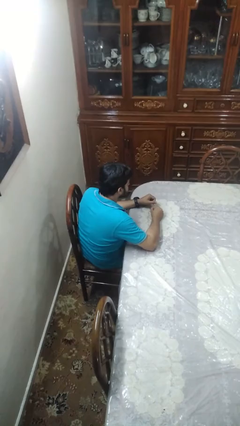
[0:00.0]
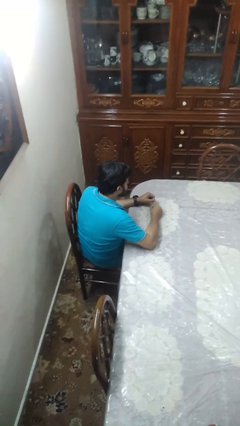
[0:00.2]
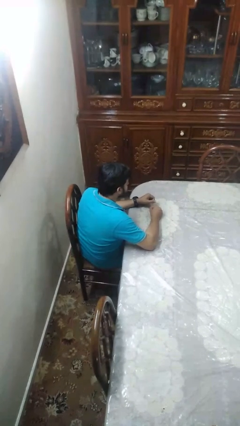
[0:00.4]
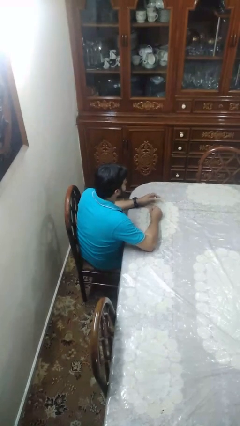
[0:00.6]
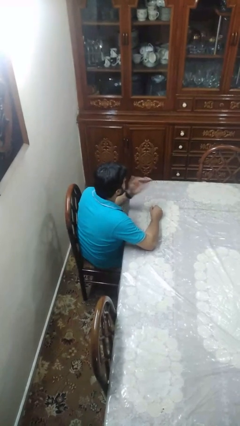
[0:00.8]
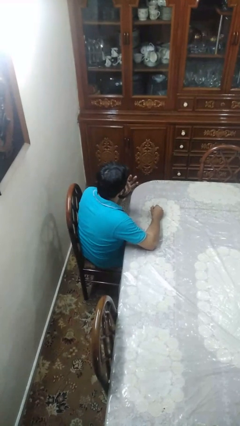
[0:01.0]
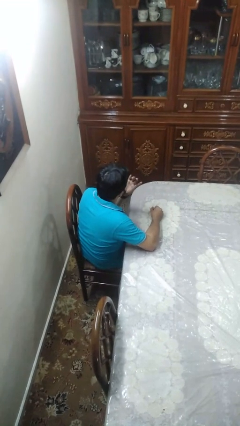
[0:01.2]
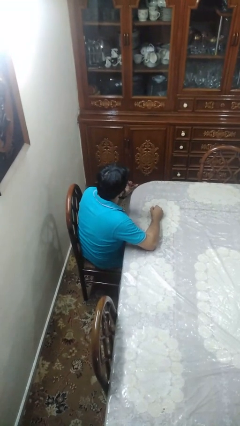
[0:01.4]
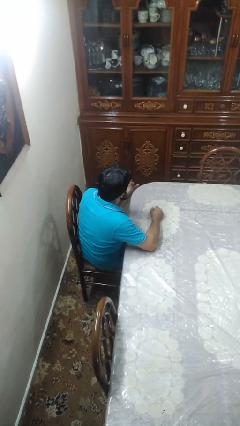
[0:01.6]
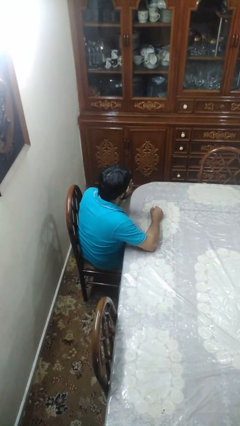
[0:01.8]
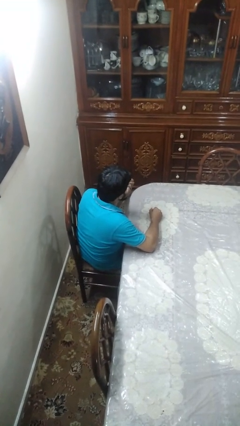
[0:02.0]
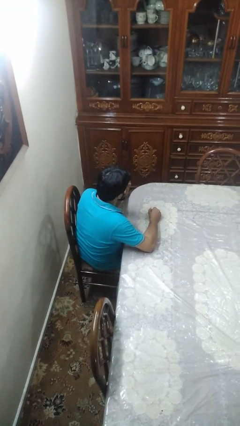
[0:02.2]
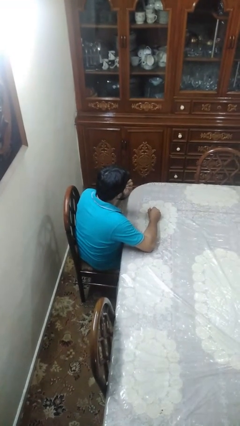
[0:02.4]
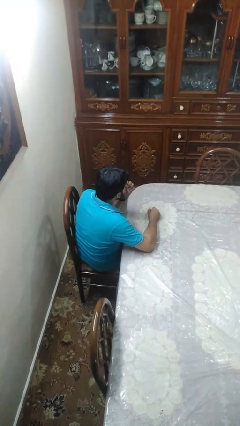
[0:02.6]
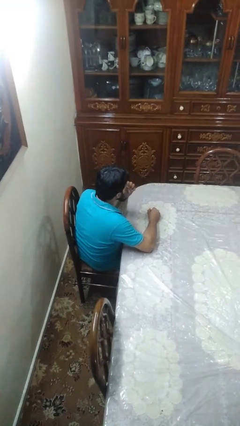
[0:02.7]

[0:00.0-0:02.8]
person licks fingers

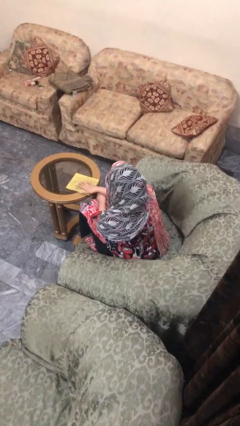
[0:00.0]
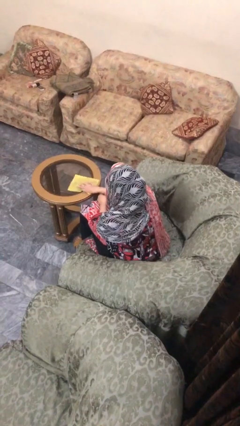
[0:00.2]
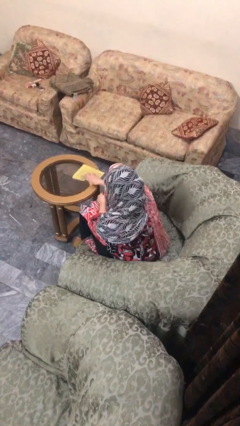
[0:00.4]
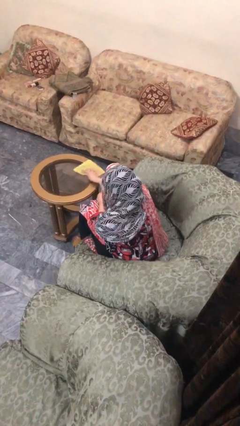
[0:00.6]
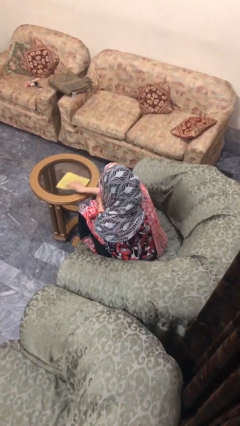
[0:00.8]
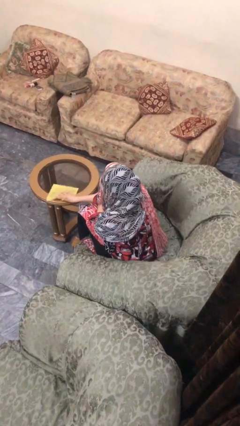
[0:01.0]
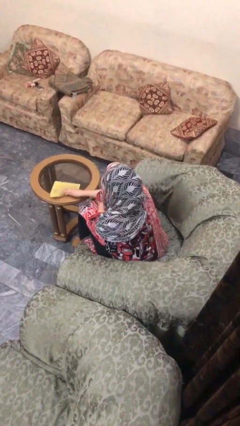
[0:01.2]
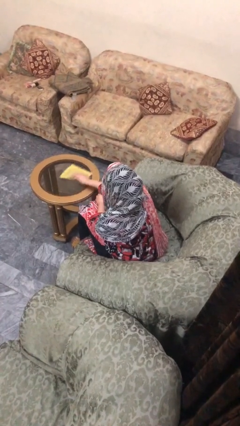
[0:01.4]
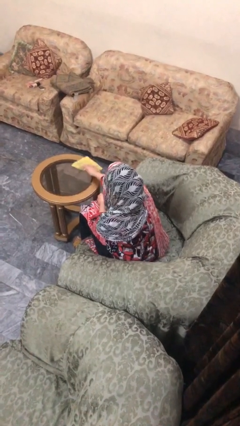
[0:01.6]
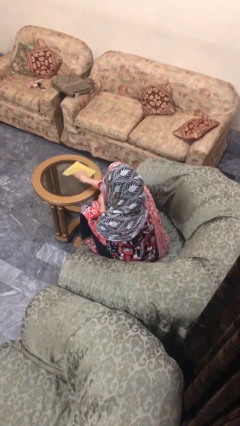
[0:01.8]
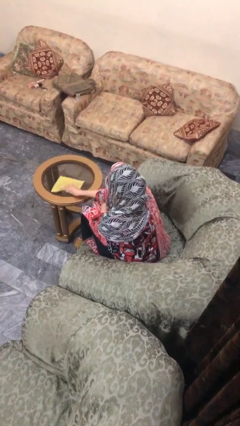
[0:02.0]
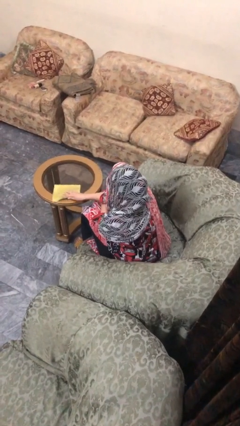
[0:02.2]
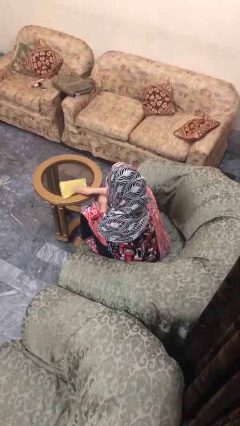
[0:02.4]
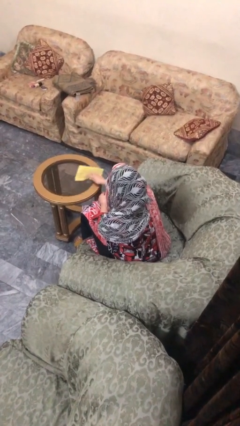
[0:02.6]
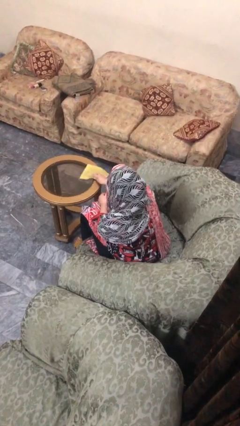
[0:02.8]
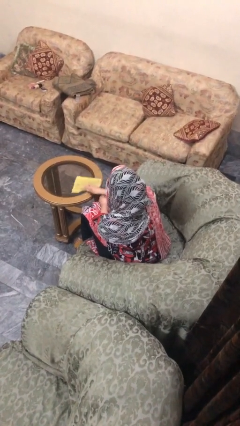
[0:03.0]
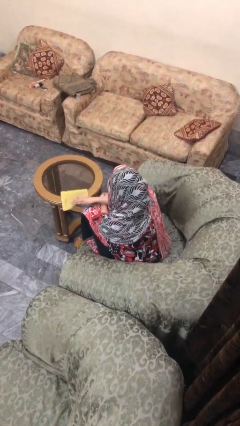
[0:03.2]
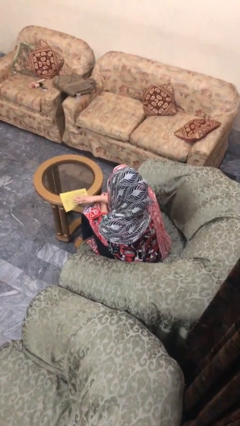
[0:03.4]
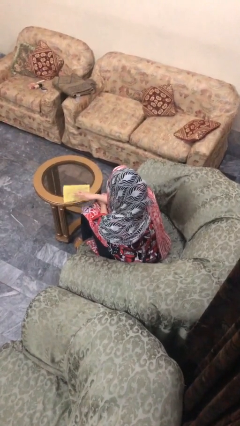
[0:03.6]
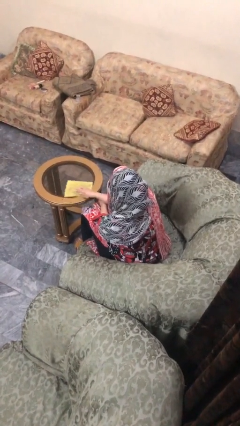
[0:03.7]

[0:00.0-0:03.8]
person cleans table with rag

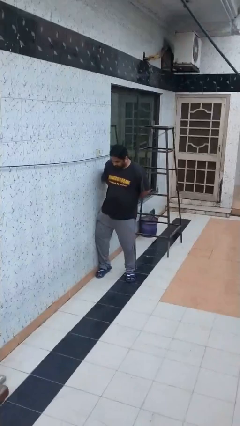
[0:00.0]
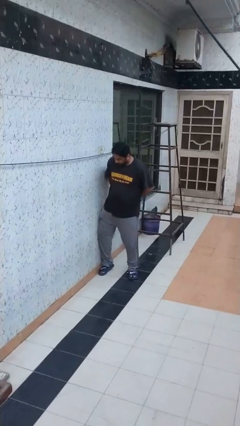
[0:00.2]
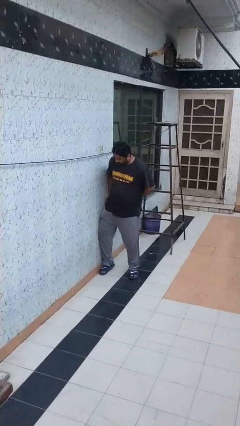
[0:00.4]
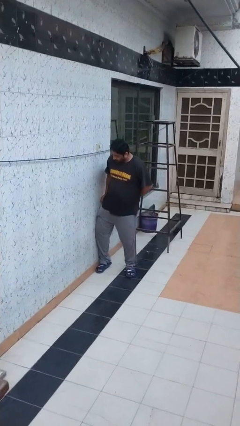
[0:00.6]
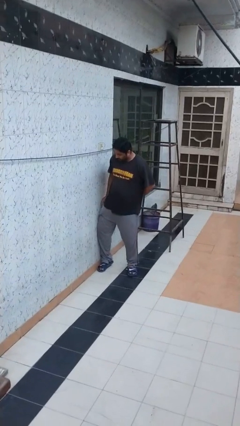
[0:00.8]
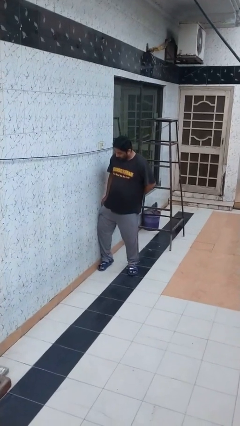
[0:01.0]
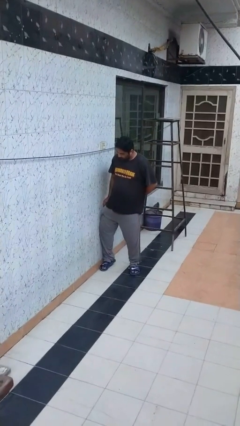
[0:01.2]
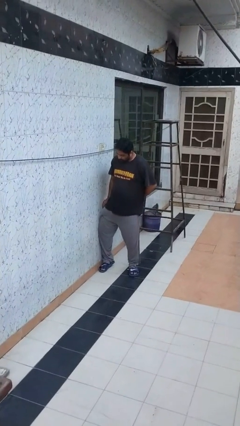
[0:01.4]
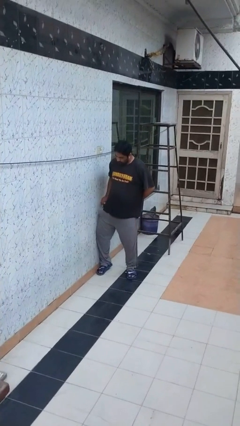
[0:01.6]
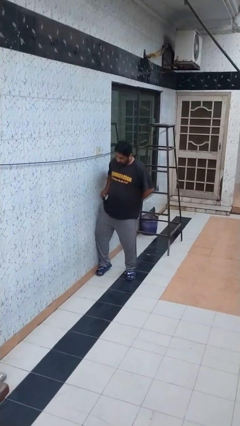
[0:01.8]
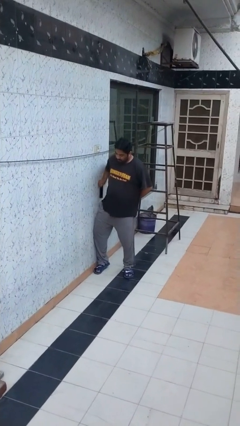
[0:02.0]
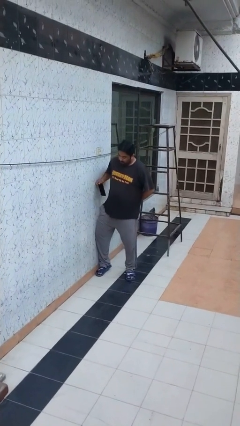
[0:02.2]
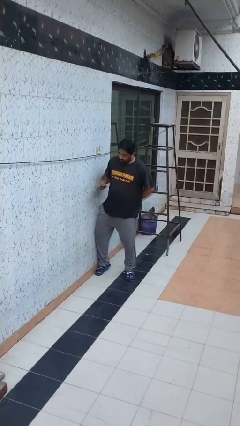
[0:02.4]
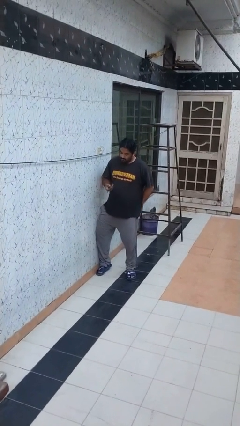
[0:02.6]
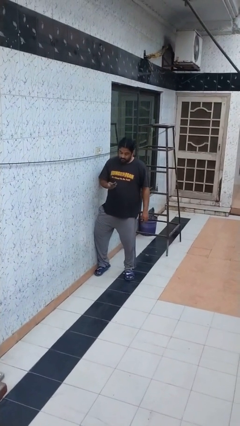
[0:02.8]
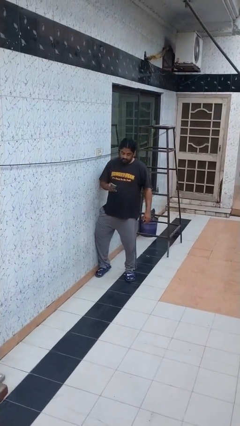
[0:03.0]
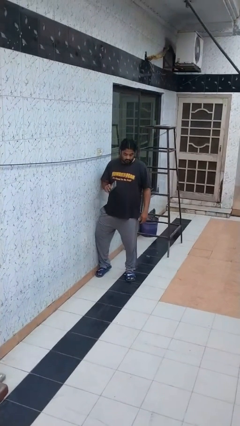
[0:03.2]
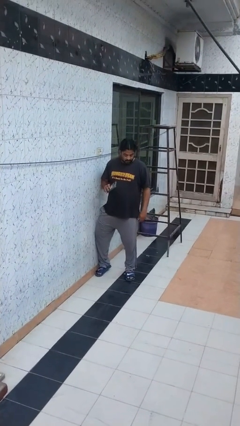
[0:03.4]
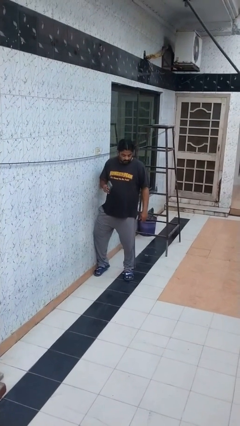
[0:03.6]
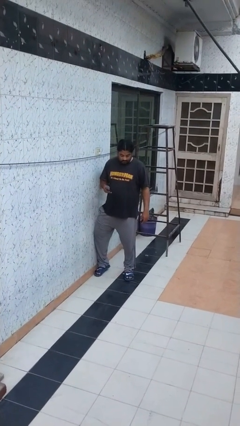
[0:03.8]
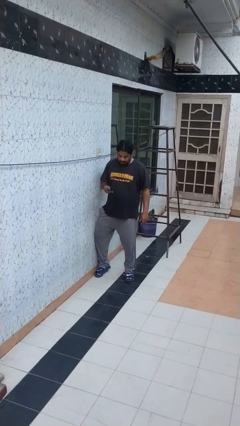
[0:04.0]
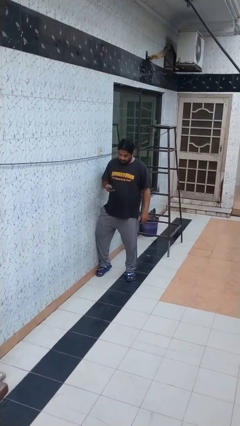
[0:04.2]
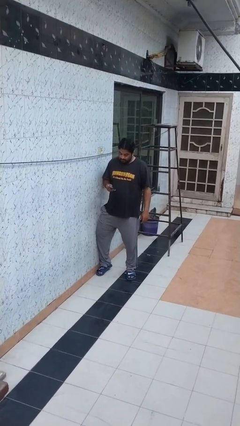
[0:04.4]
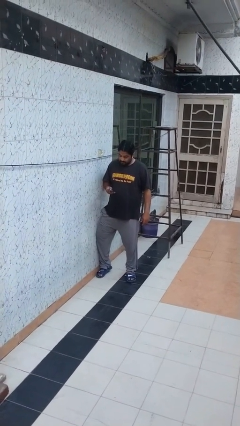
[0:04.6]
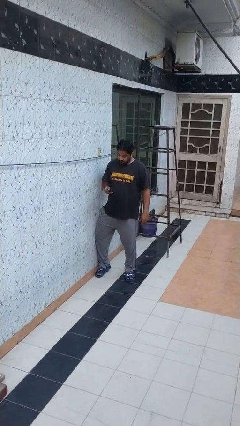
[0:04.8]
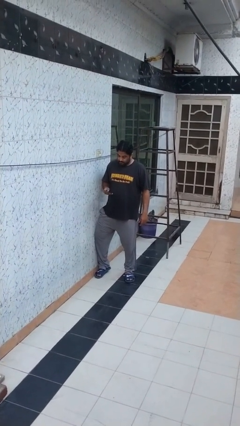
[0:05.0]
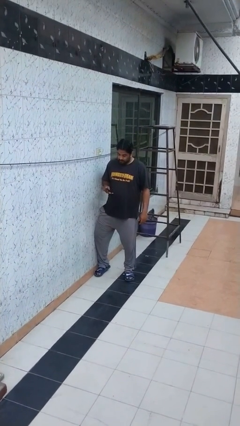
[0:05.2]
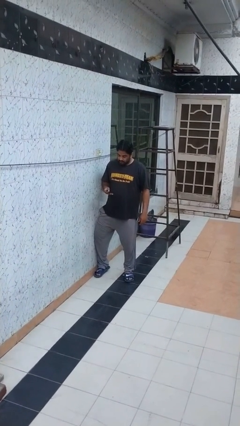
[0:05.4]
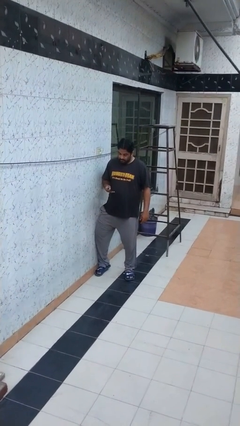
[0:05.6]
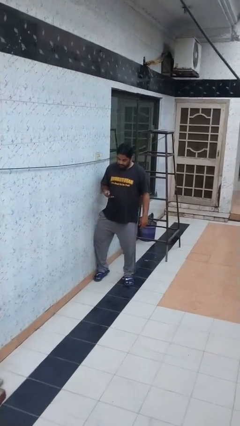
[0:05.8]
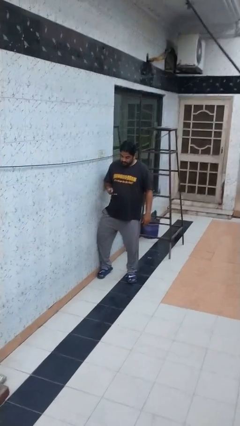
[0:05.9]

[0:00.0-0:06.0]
person takes phone from pocket

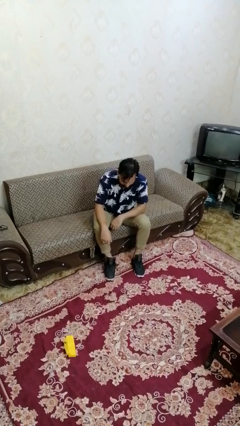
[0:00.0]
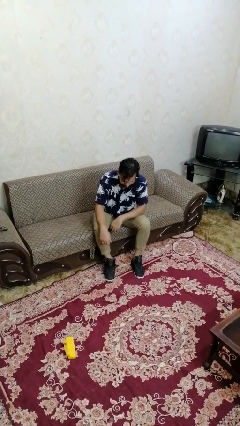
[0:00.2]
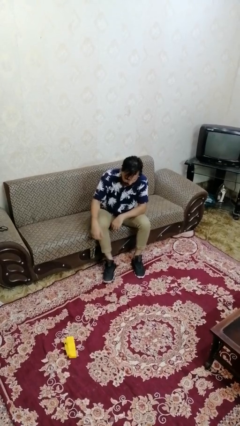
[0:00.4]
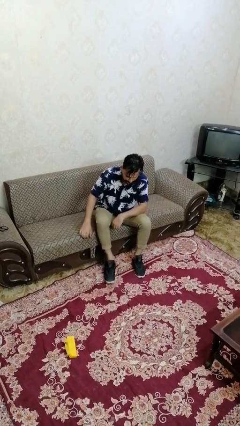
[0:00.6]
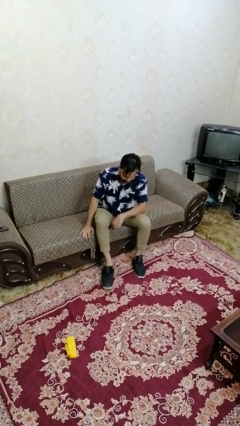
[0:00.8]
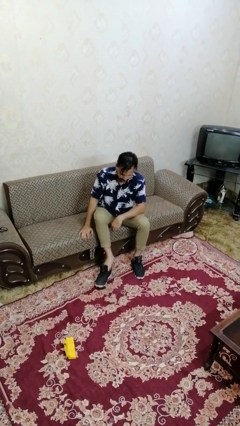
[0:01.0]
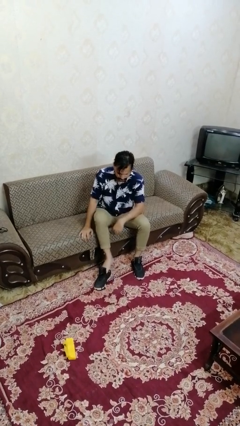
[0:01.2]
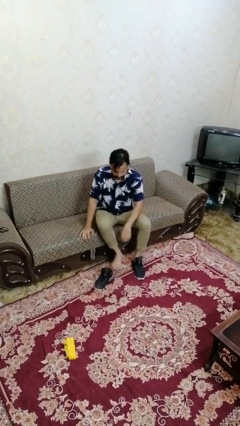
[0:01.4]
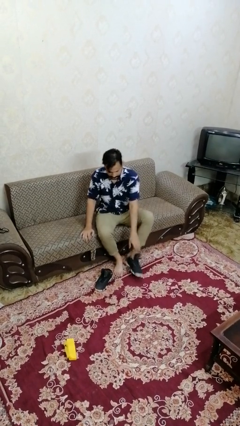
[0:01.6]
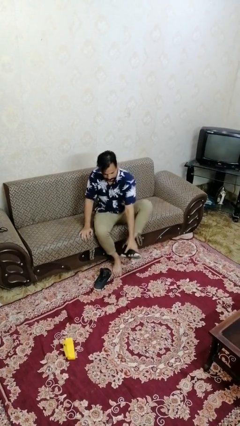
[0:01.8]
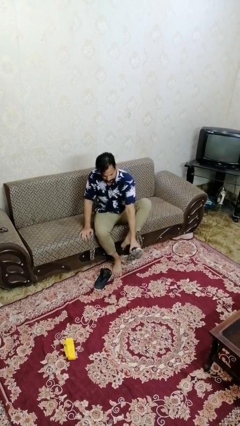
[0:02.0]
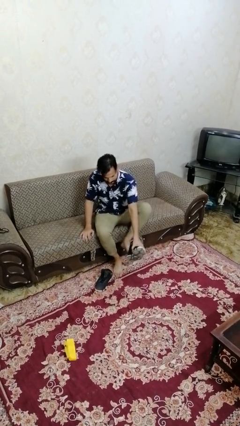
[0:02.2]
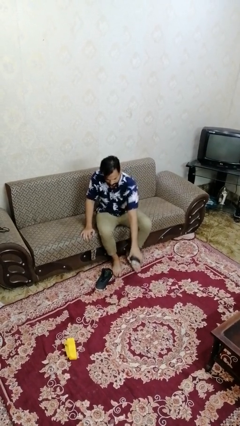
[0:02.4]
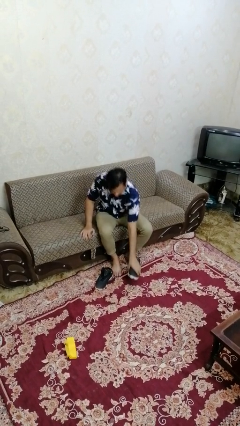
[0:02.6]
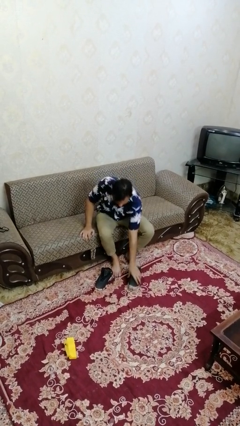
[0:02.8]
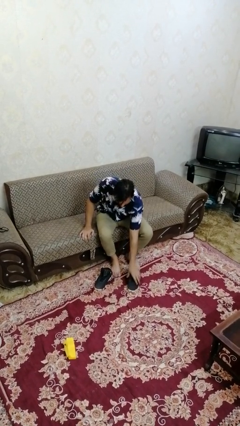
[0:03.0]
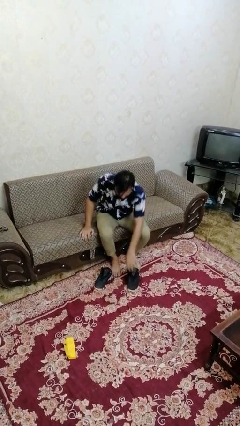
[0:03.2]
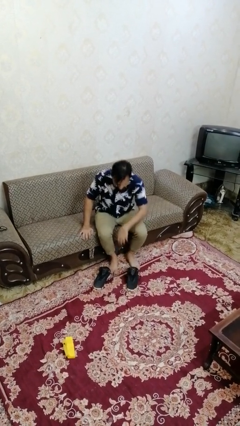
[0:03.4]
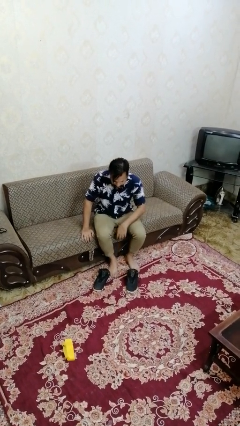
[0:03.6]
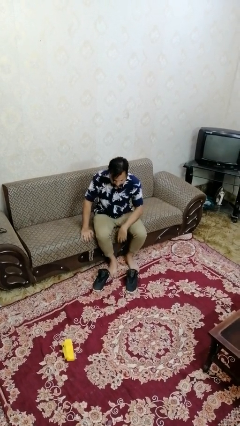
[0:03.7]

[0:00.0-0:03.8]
person takes off shoes

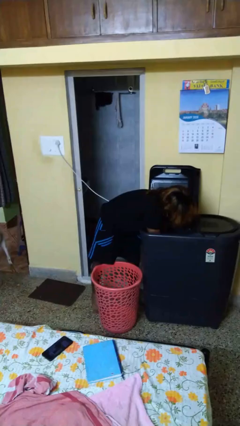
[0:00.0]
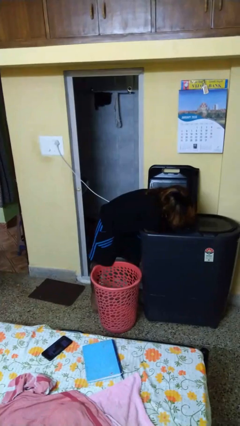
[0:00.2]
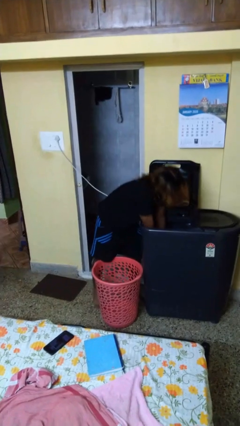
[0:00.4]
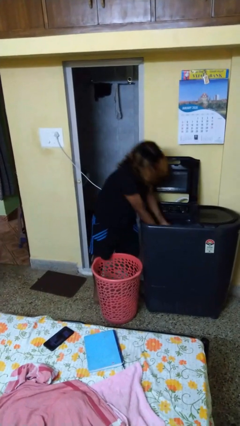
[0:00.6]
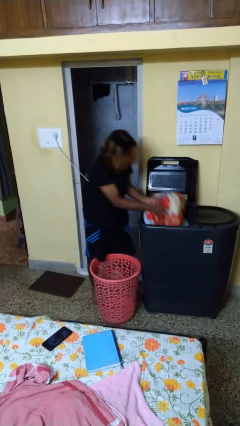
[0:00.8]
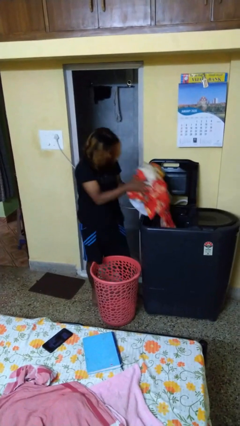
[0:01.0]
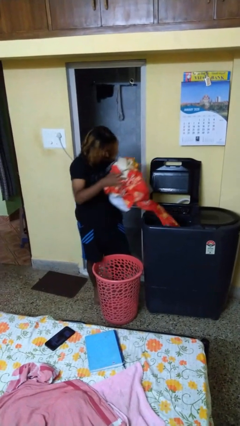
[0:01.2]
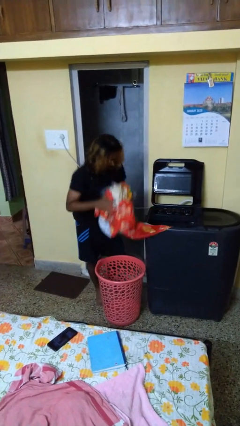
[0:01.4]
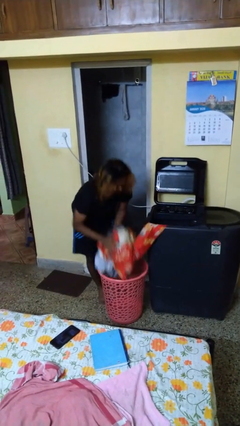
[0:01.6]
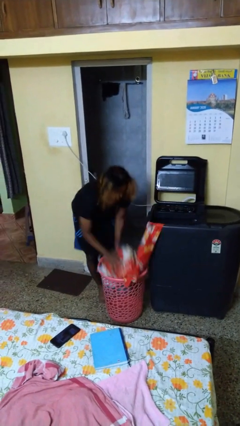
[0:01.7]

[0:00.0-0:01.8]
person unloads clotheswasher
